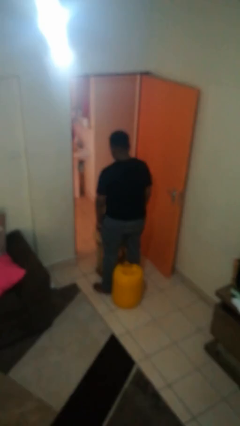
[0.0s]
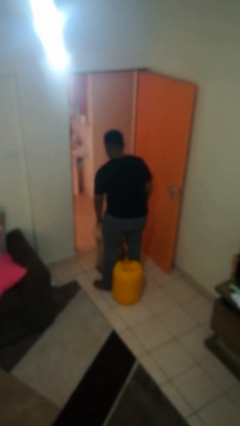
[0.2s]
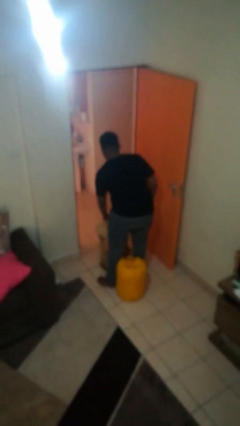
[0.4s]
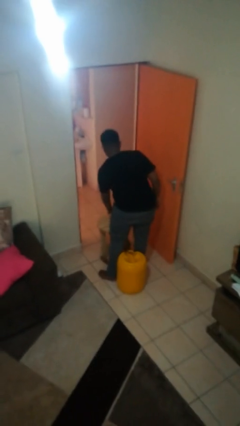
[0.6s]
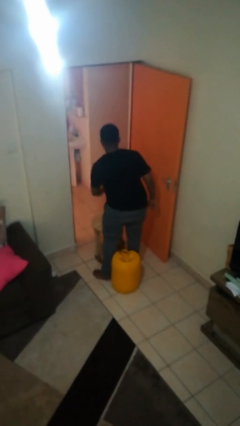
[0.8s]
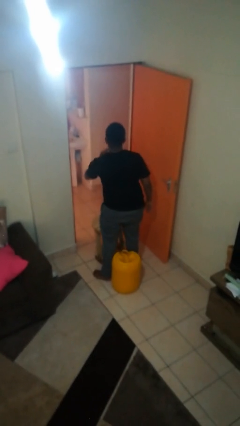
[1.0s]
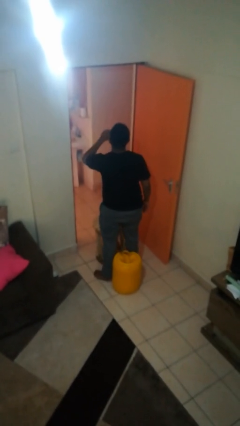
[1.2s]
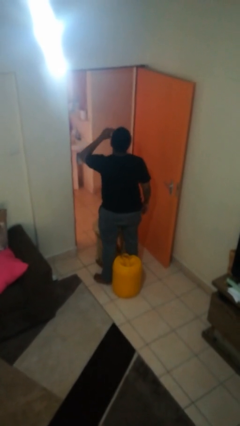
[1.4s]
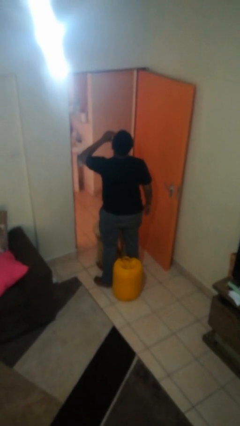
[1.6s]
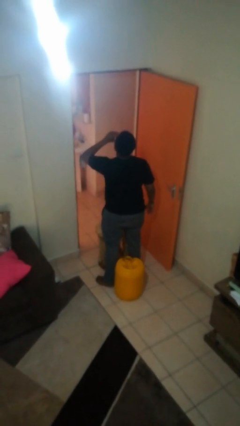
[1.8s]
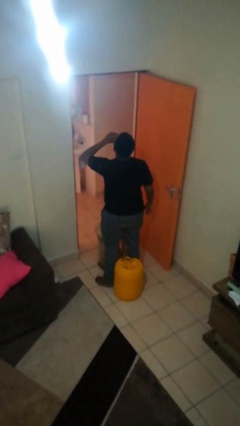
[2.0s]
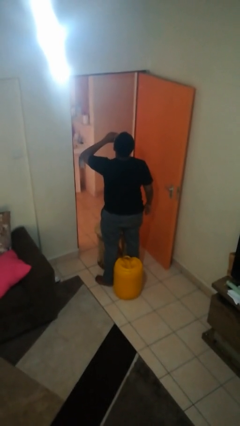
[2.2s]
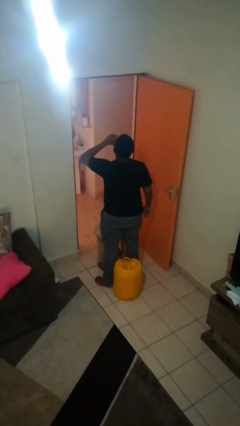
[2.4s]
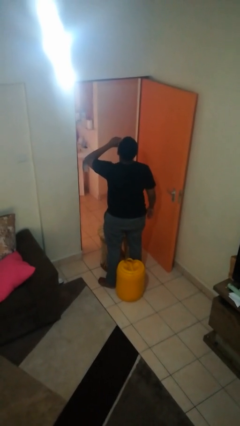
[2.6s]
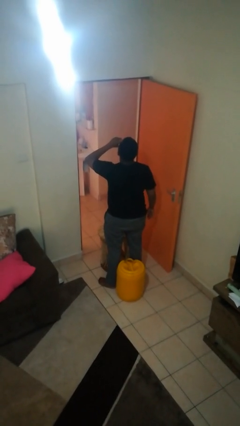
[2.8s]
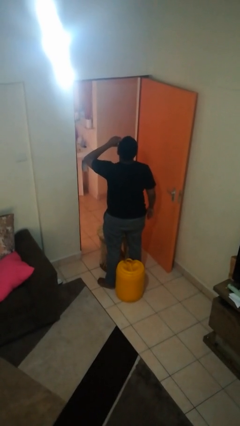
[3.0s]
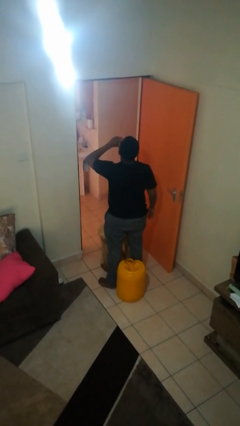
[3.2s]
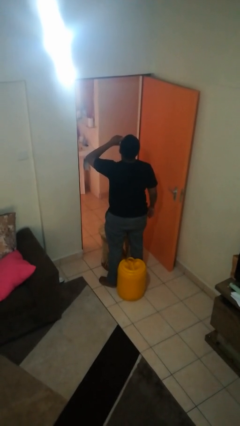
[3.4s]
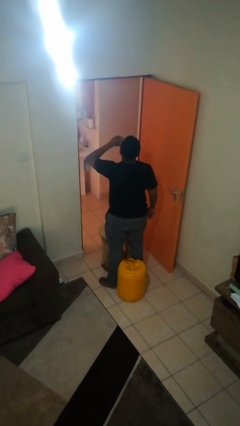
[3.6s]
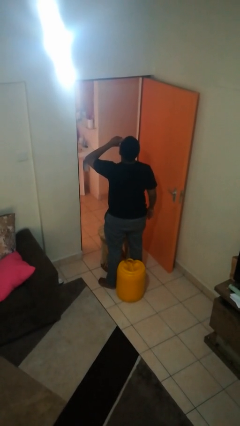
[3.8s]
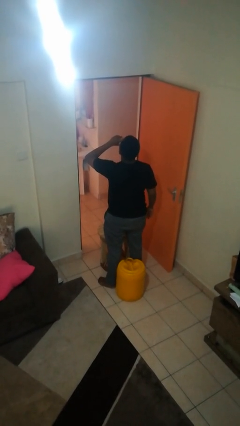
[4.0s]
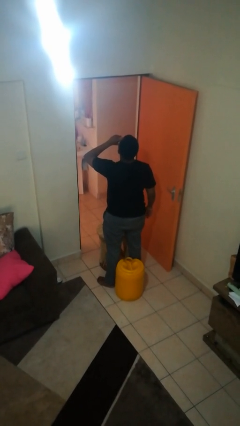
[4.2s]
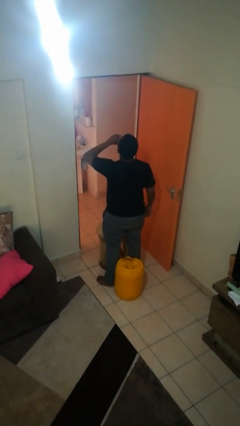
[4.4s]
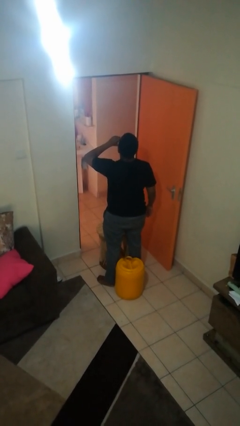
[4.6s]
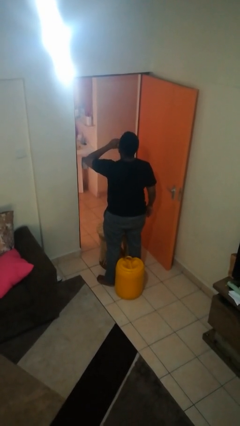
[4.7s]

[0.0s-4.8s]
person drinks from bottle

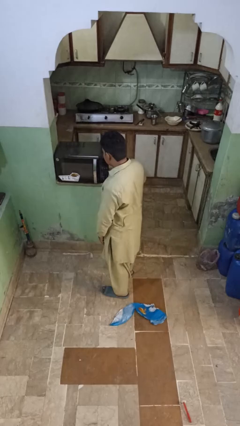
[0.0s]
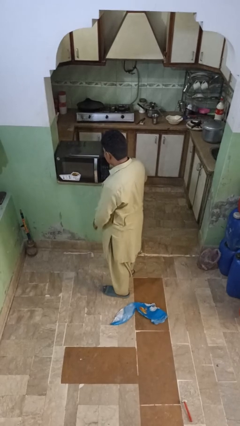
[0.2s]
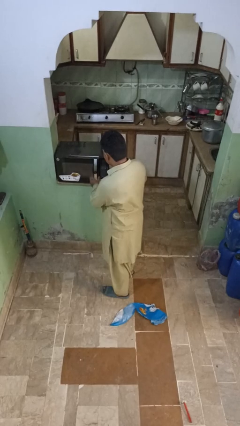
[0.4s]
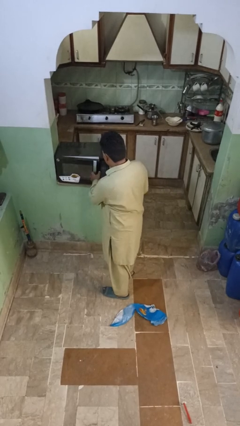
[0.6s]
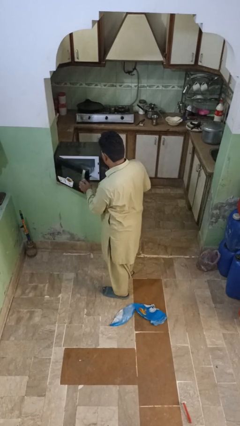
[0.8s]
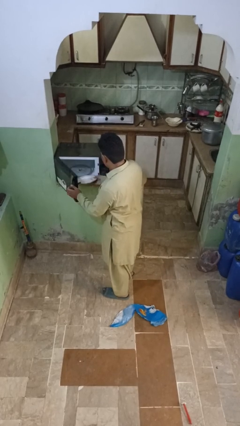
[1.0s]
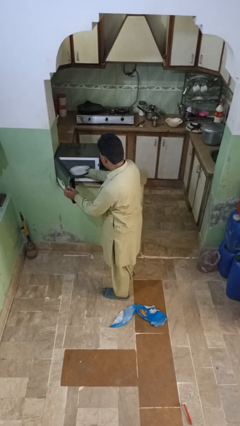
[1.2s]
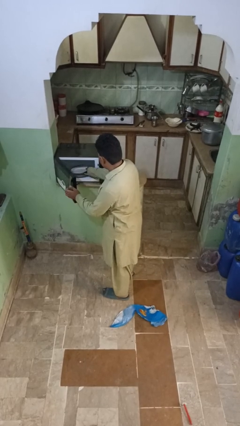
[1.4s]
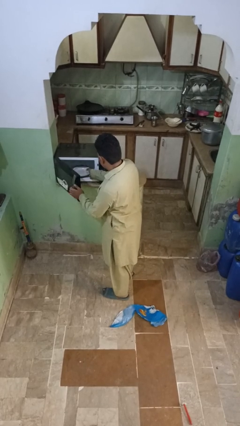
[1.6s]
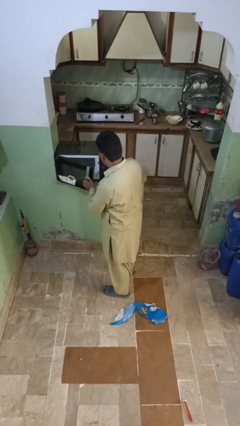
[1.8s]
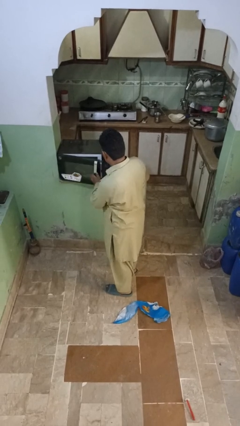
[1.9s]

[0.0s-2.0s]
person puts object into microwave

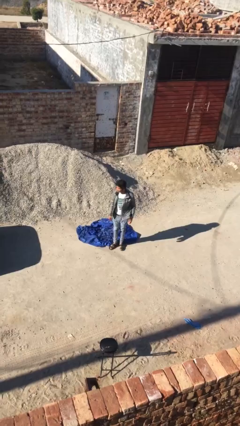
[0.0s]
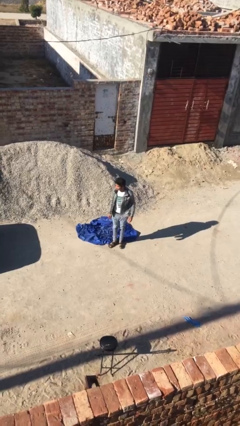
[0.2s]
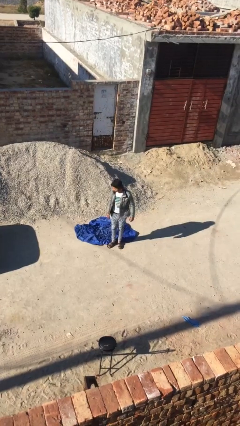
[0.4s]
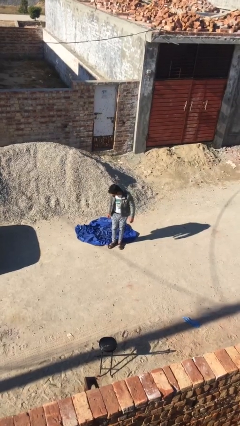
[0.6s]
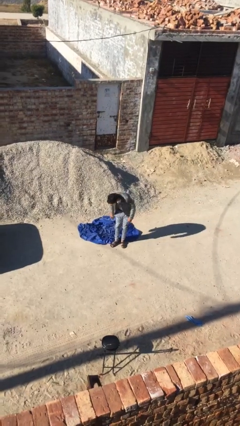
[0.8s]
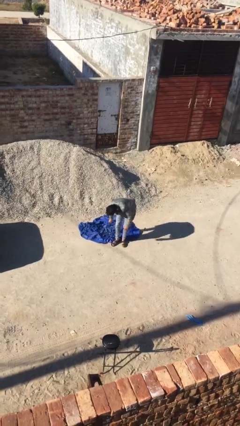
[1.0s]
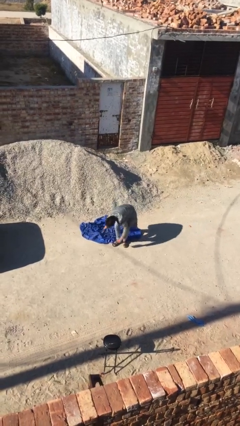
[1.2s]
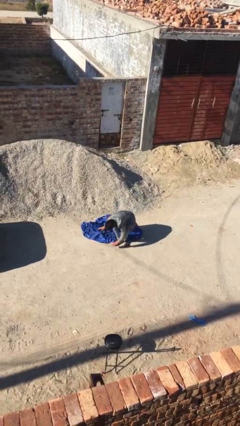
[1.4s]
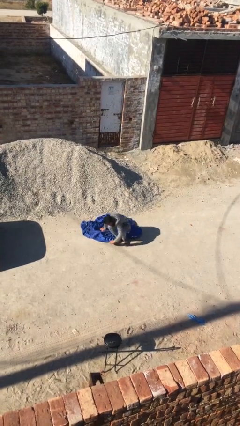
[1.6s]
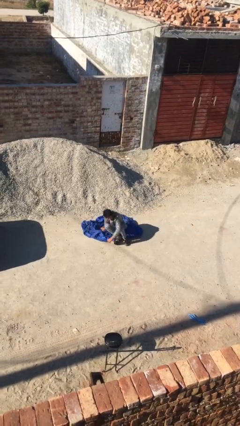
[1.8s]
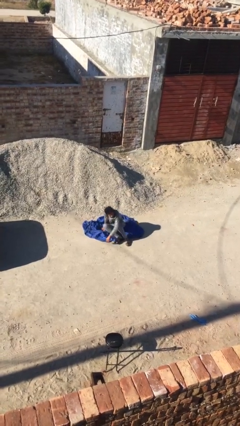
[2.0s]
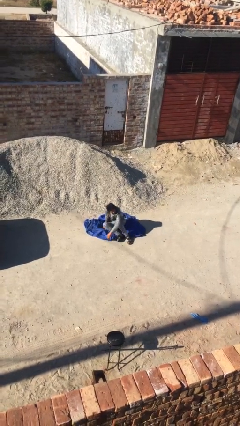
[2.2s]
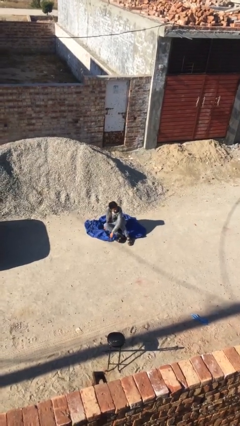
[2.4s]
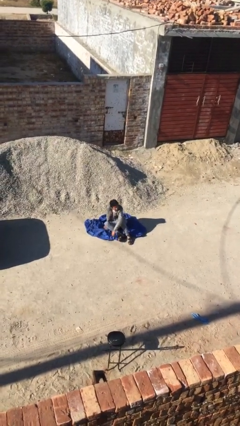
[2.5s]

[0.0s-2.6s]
person sits down

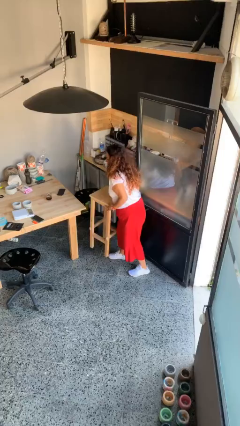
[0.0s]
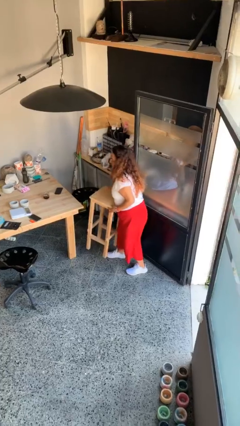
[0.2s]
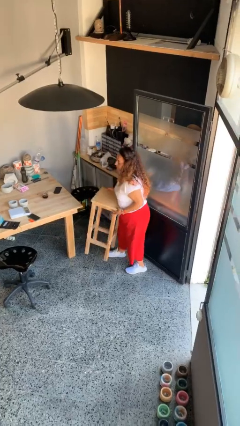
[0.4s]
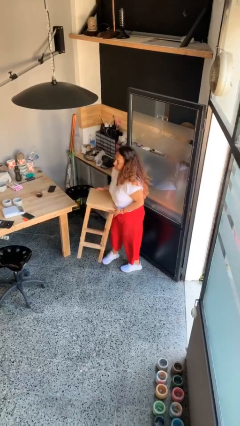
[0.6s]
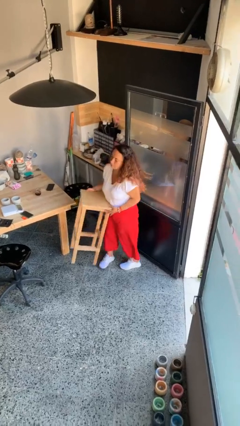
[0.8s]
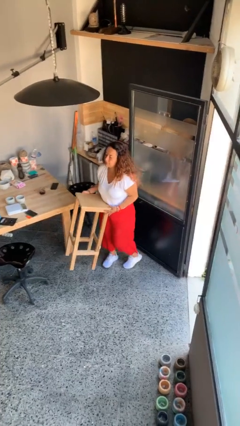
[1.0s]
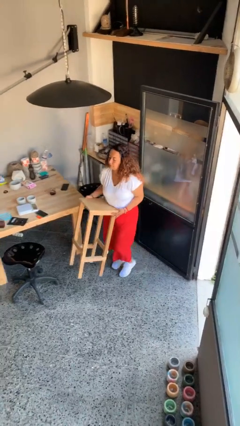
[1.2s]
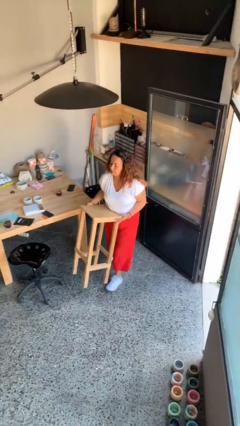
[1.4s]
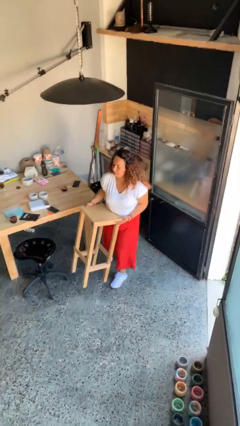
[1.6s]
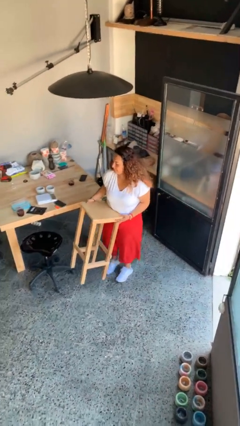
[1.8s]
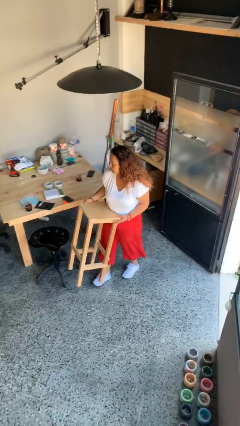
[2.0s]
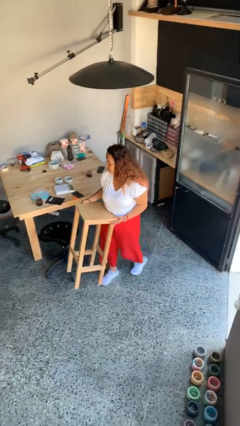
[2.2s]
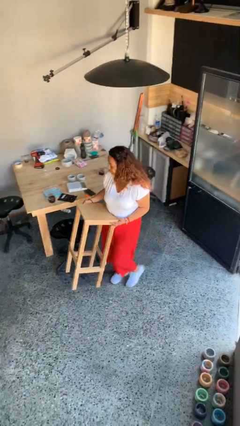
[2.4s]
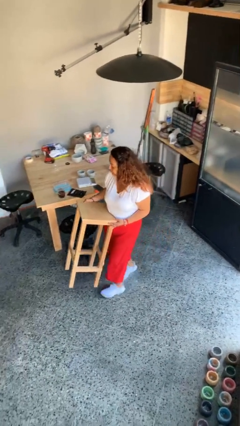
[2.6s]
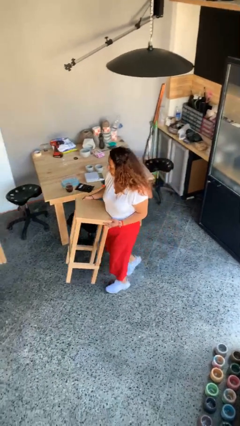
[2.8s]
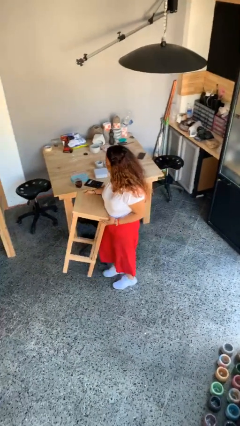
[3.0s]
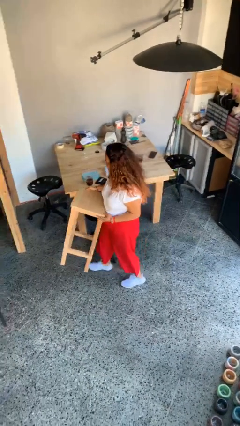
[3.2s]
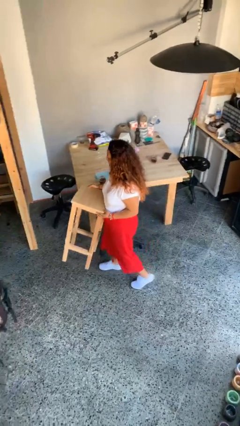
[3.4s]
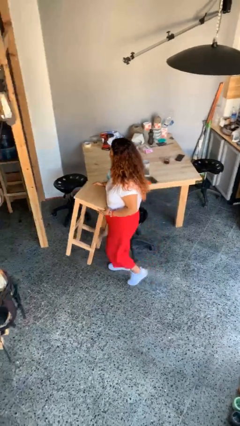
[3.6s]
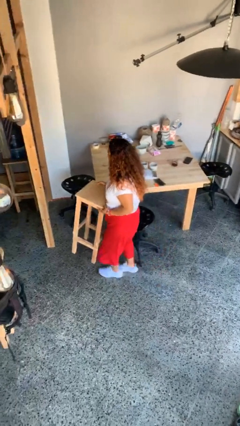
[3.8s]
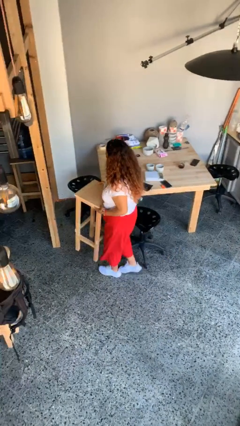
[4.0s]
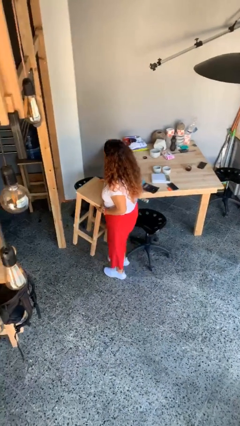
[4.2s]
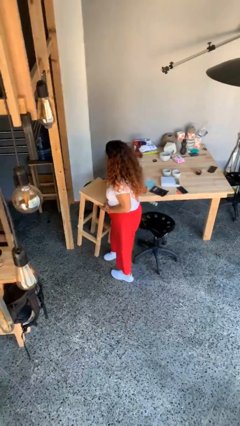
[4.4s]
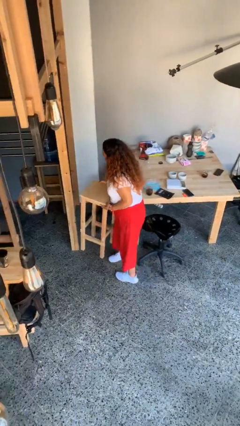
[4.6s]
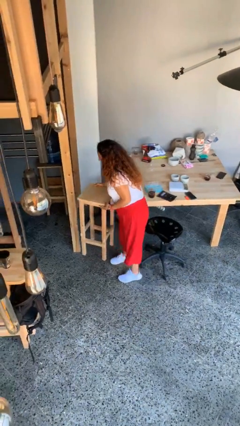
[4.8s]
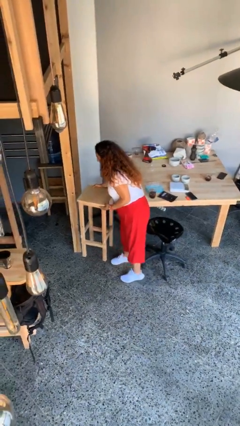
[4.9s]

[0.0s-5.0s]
person carries heavy object

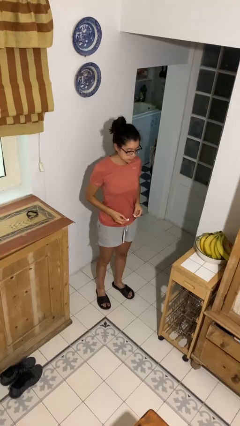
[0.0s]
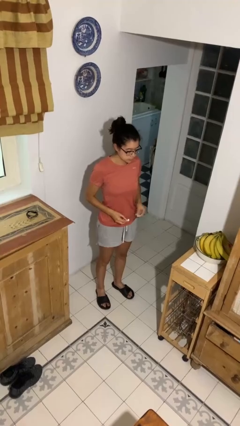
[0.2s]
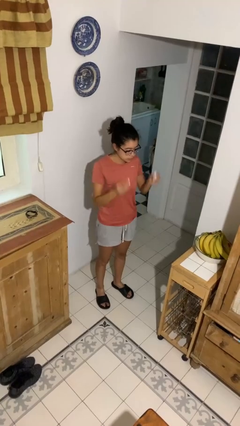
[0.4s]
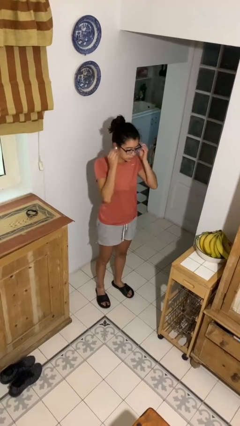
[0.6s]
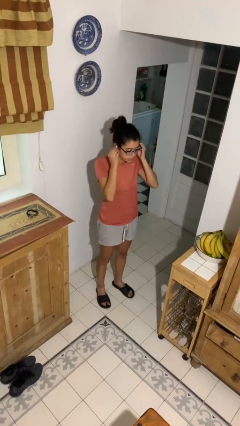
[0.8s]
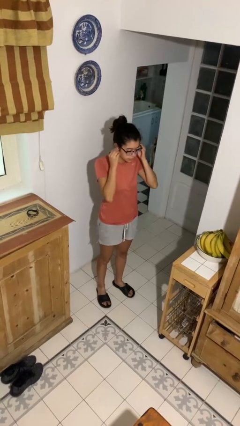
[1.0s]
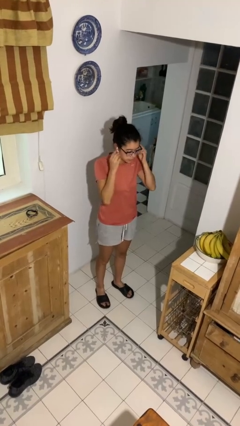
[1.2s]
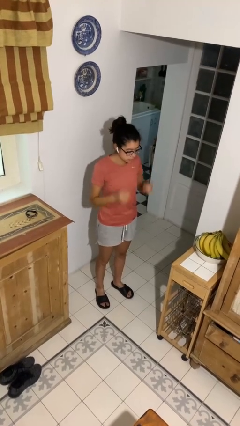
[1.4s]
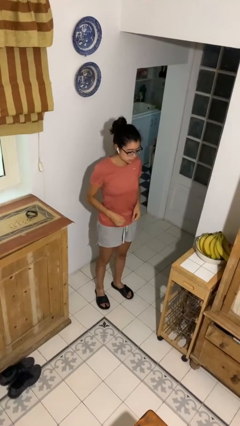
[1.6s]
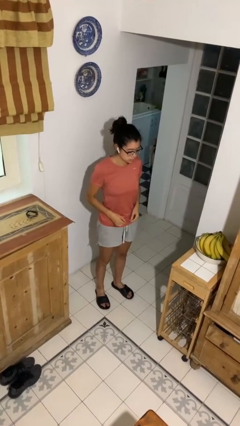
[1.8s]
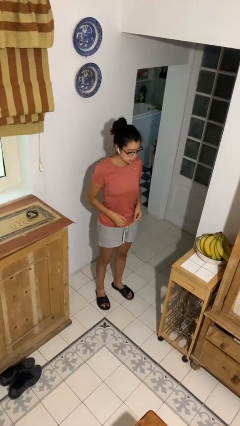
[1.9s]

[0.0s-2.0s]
person puts on headphones

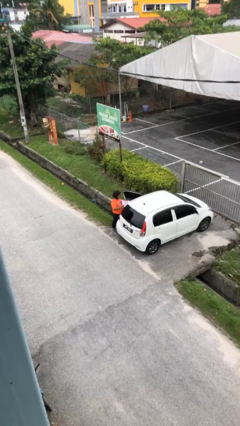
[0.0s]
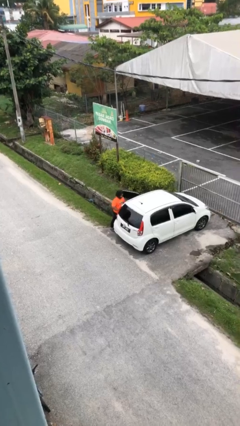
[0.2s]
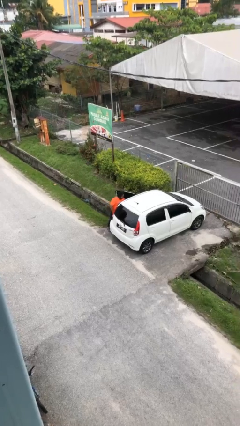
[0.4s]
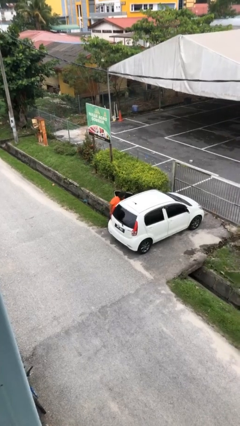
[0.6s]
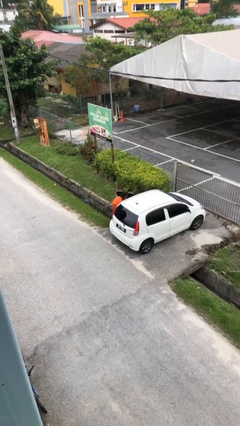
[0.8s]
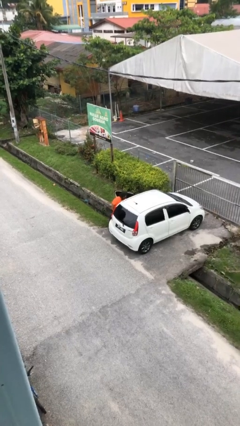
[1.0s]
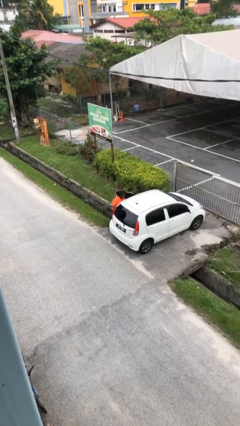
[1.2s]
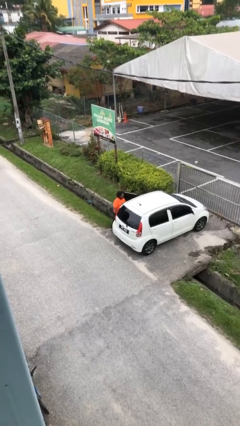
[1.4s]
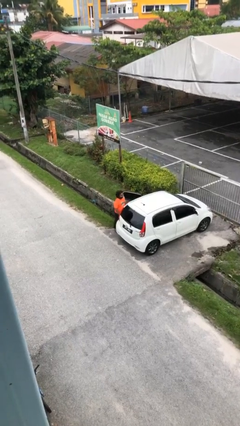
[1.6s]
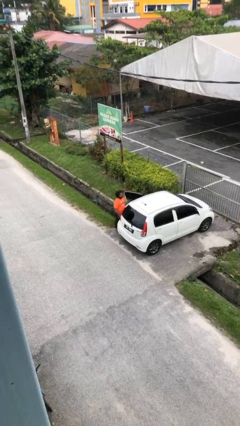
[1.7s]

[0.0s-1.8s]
person loads car
